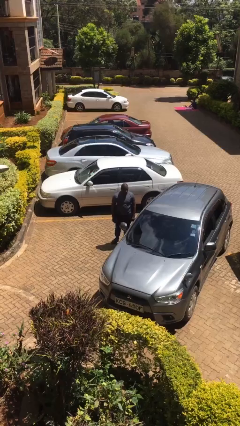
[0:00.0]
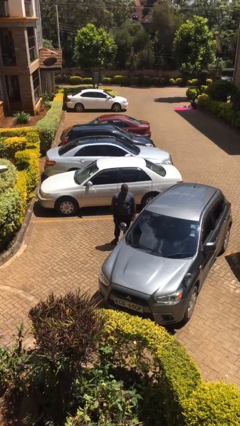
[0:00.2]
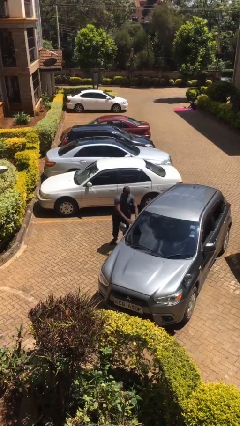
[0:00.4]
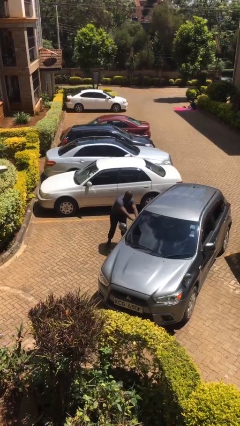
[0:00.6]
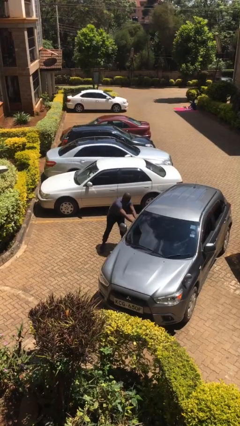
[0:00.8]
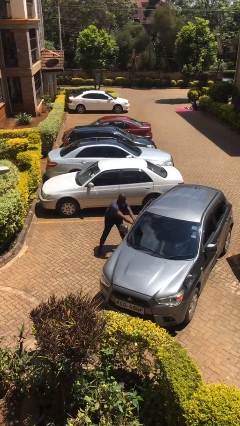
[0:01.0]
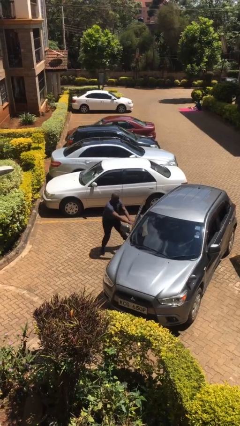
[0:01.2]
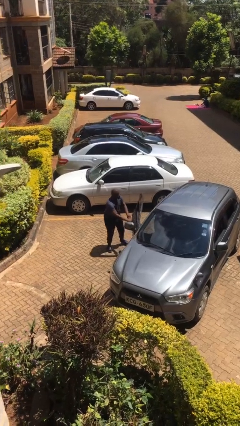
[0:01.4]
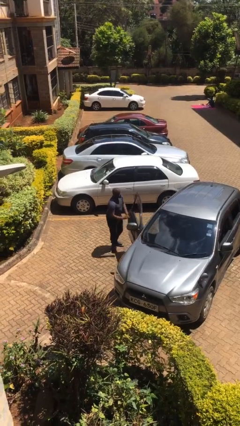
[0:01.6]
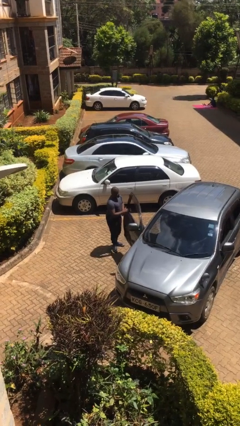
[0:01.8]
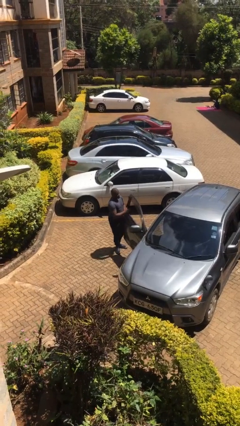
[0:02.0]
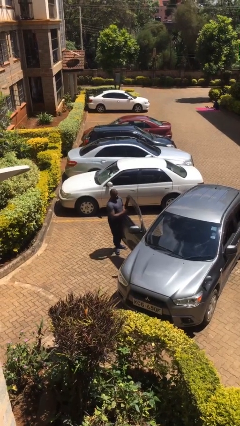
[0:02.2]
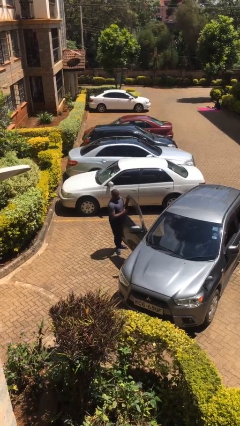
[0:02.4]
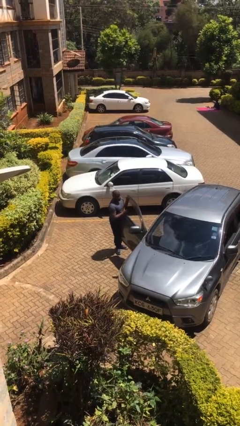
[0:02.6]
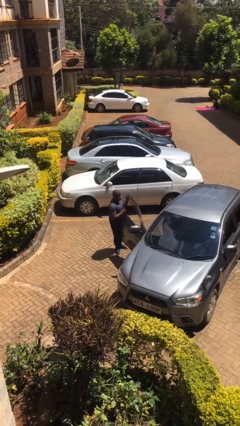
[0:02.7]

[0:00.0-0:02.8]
person opens car door

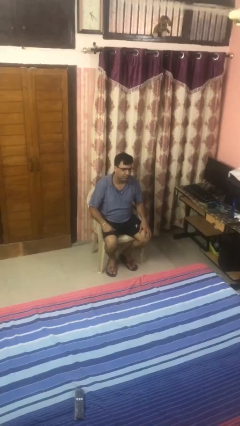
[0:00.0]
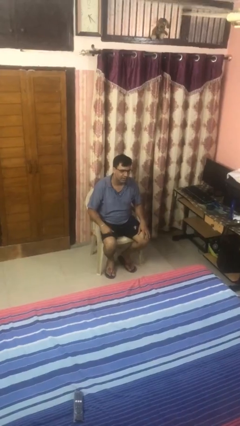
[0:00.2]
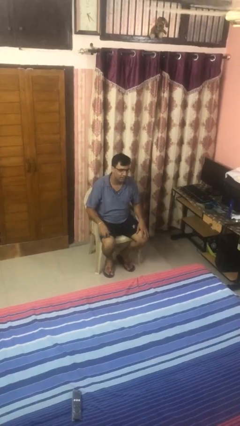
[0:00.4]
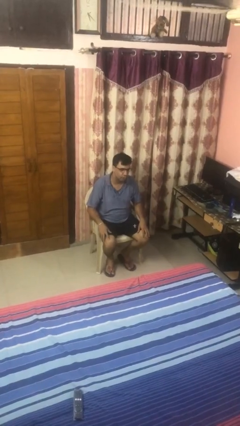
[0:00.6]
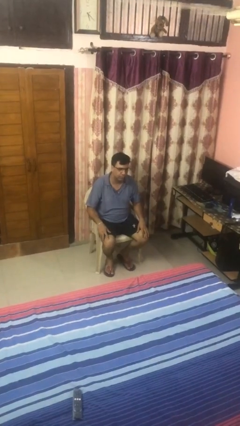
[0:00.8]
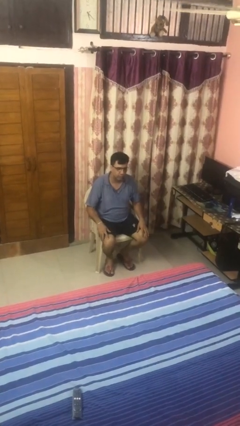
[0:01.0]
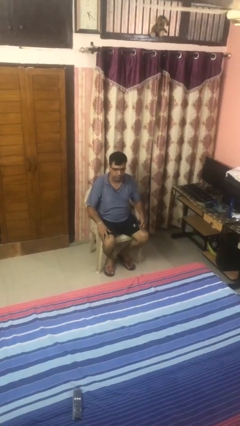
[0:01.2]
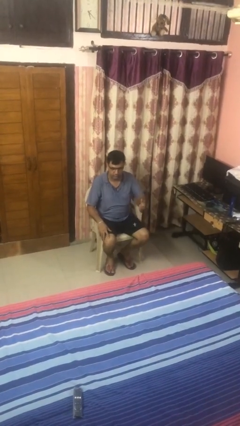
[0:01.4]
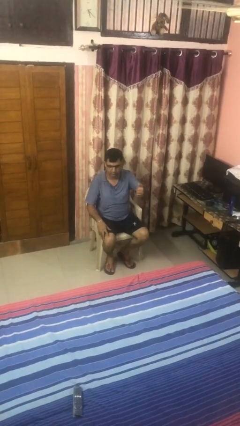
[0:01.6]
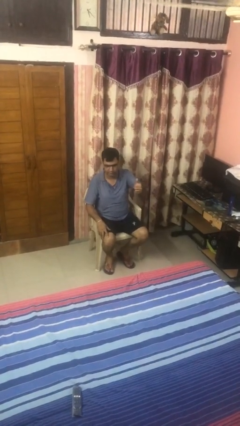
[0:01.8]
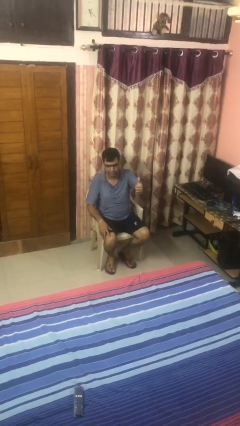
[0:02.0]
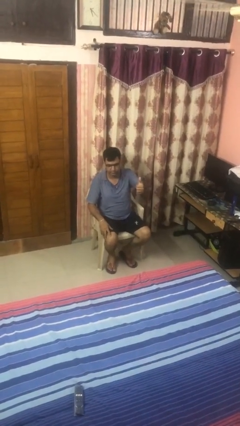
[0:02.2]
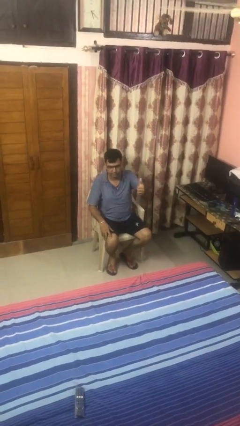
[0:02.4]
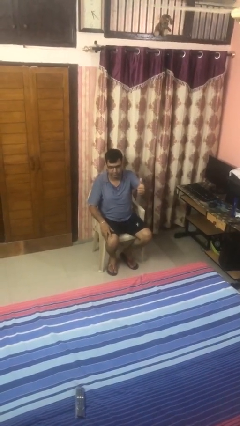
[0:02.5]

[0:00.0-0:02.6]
person gestures thumbs up

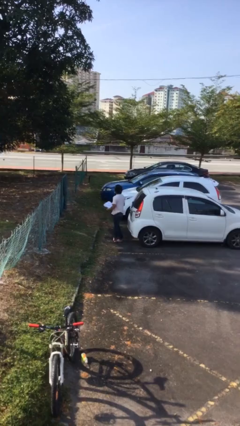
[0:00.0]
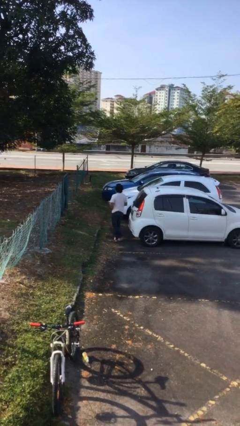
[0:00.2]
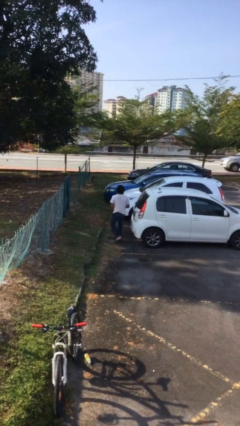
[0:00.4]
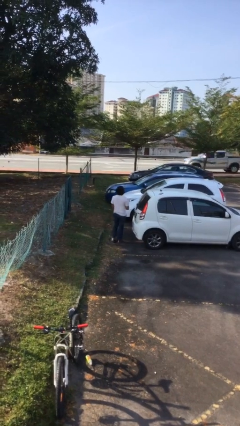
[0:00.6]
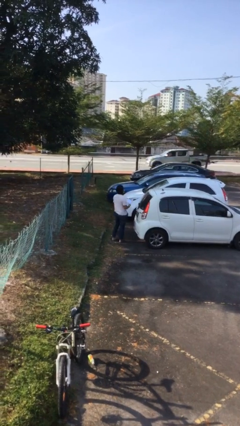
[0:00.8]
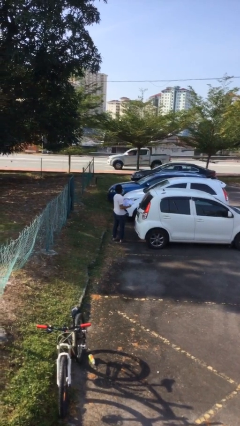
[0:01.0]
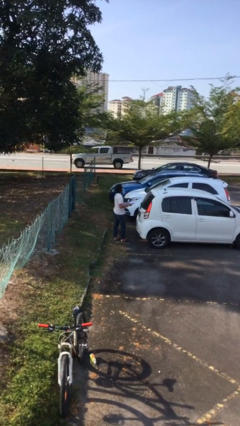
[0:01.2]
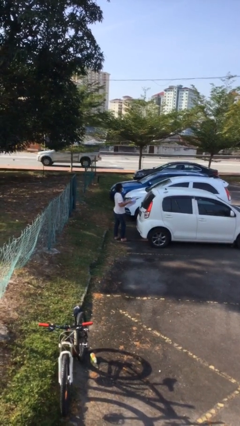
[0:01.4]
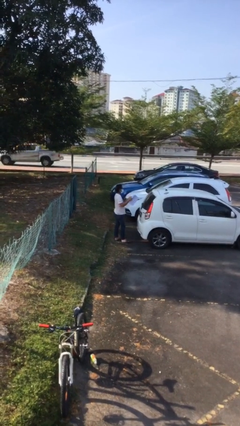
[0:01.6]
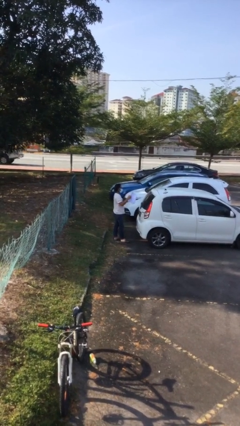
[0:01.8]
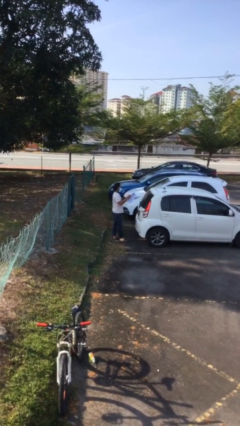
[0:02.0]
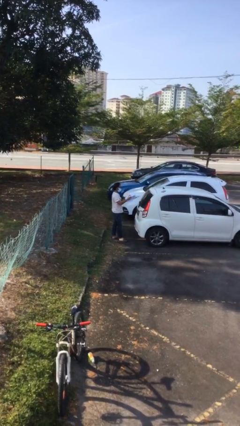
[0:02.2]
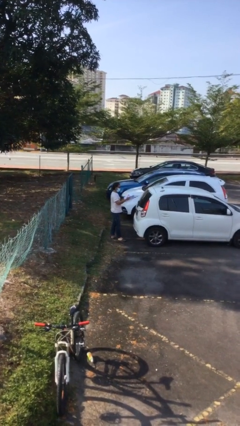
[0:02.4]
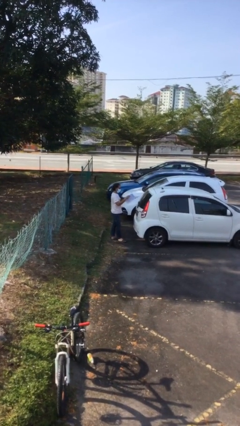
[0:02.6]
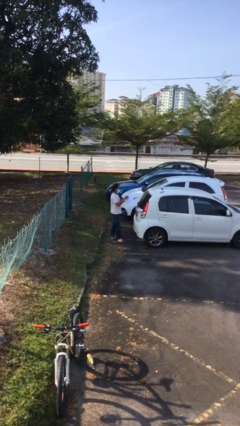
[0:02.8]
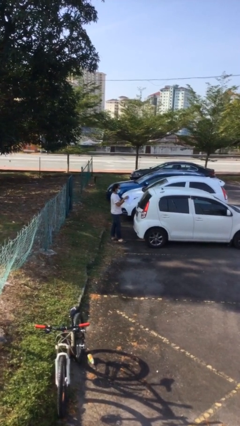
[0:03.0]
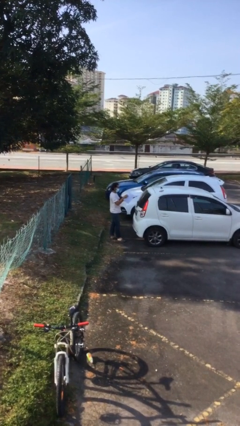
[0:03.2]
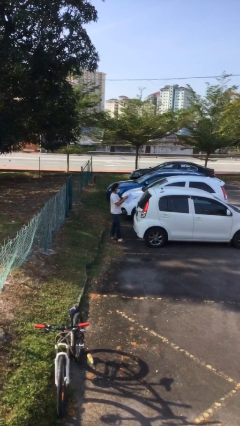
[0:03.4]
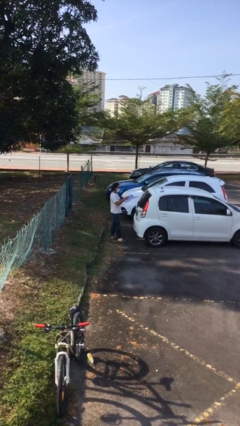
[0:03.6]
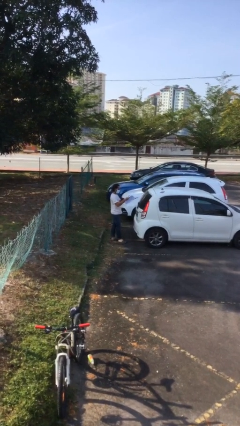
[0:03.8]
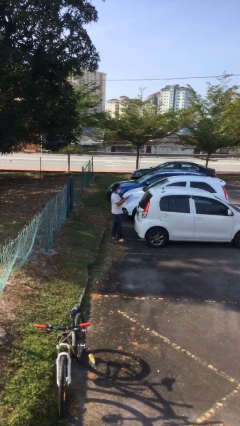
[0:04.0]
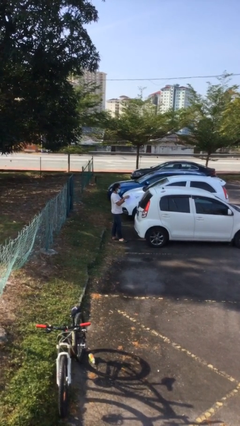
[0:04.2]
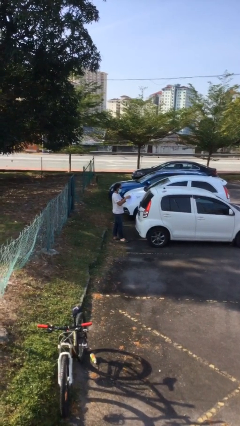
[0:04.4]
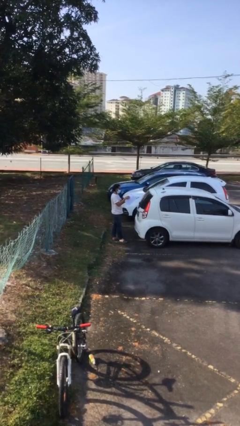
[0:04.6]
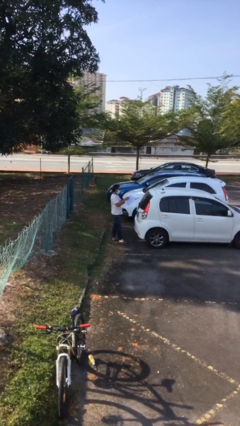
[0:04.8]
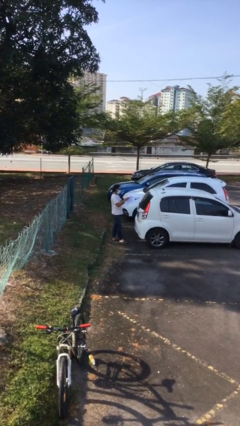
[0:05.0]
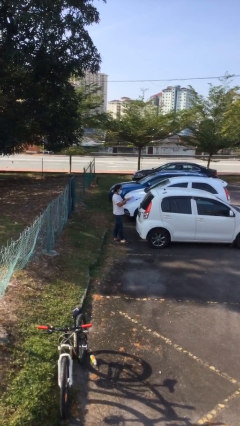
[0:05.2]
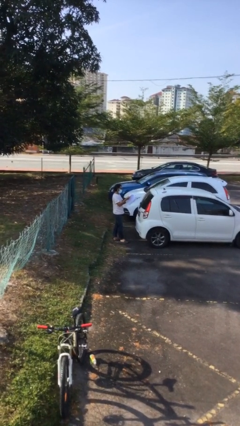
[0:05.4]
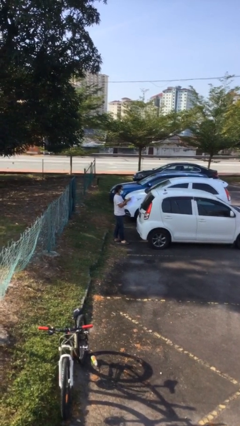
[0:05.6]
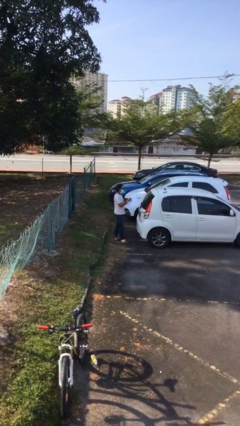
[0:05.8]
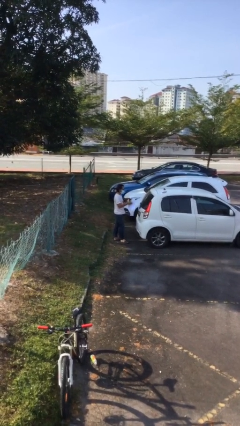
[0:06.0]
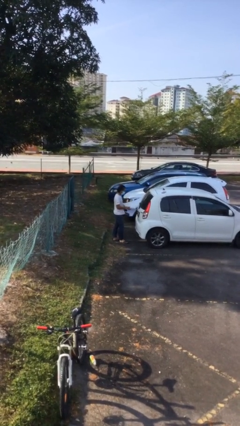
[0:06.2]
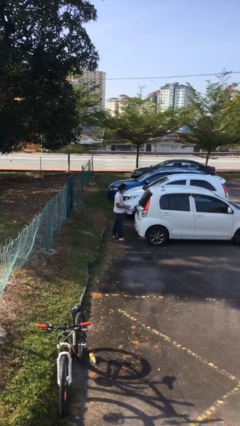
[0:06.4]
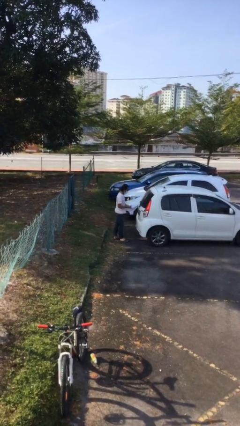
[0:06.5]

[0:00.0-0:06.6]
person reads document

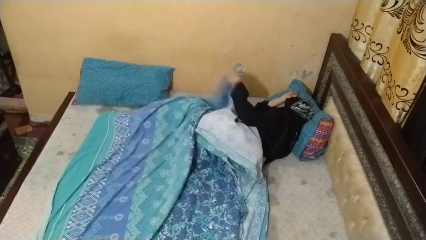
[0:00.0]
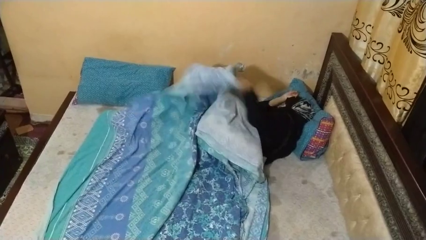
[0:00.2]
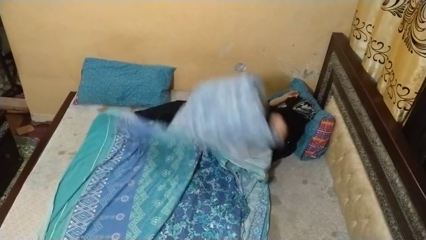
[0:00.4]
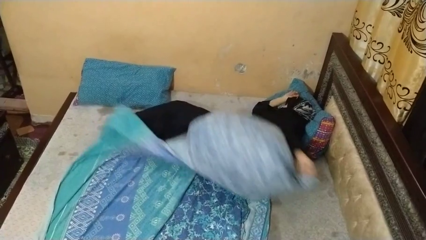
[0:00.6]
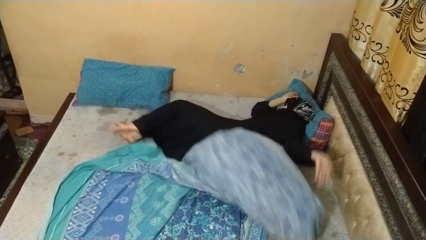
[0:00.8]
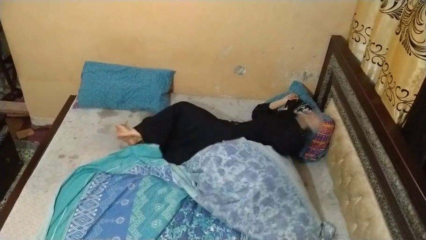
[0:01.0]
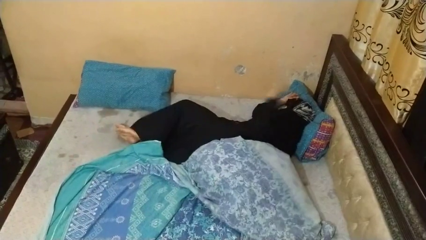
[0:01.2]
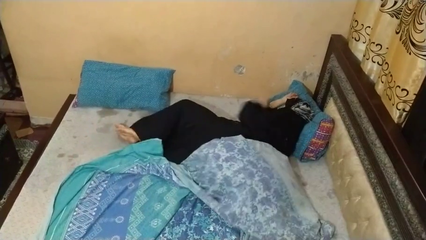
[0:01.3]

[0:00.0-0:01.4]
person uncovers with bedsheets

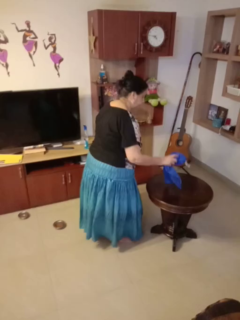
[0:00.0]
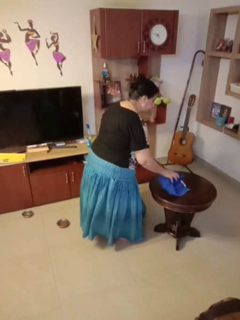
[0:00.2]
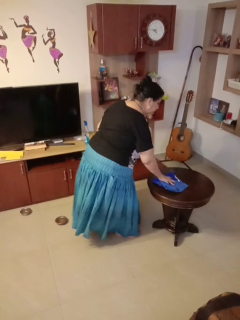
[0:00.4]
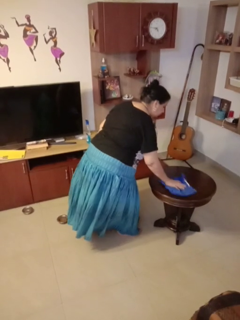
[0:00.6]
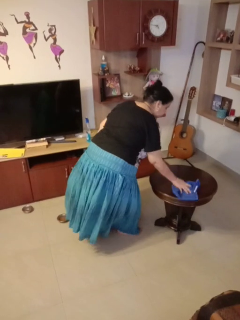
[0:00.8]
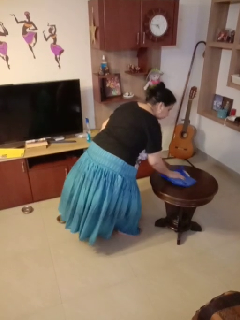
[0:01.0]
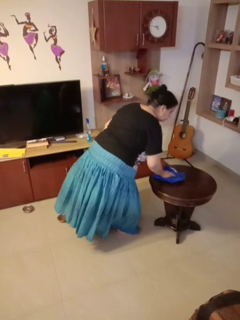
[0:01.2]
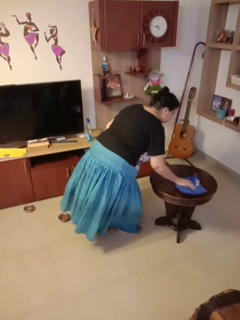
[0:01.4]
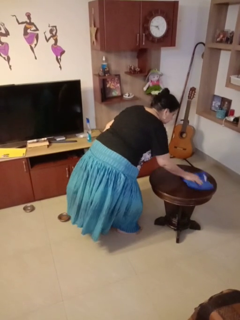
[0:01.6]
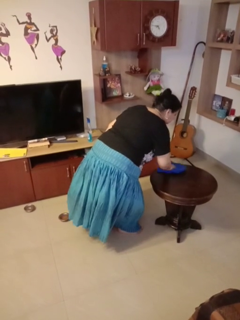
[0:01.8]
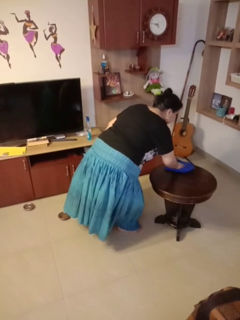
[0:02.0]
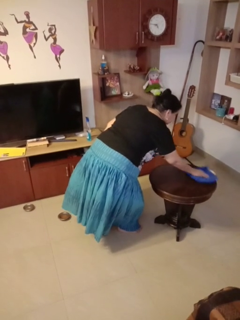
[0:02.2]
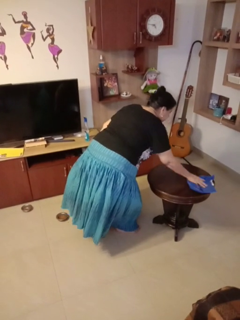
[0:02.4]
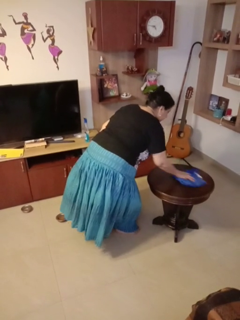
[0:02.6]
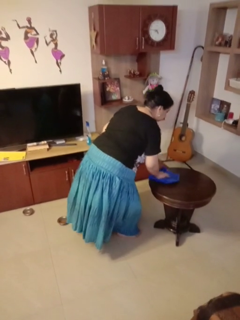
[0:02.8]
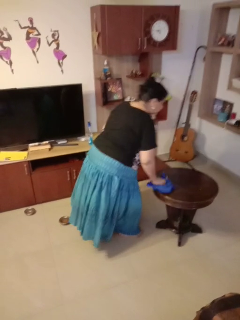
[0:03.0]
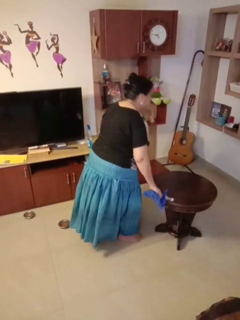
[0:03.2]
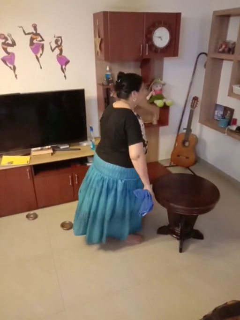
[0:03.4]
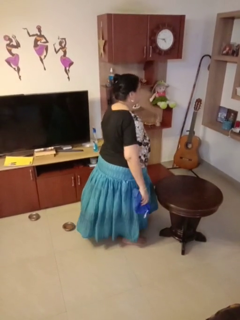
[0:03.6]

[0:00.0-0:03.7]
person cleans table with rag

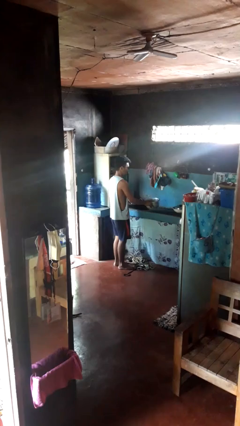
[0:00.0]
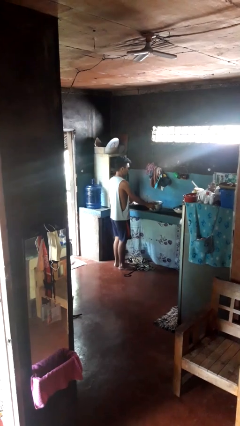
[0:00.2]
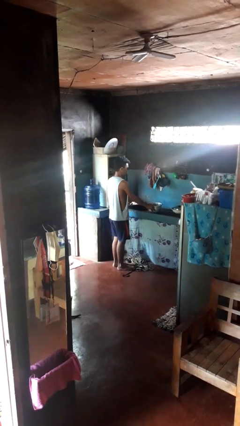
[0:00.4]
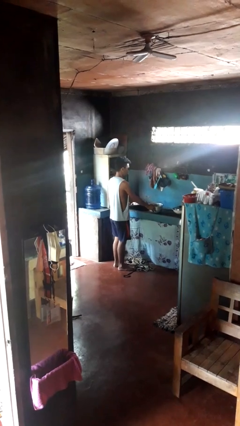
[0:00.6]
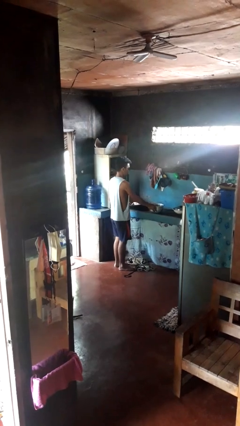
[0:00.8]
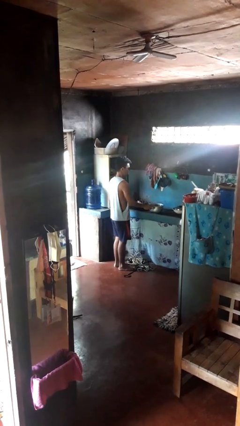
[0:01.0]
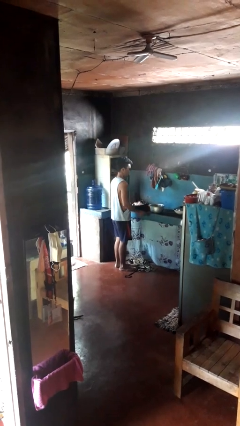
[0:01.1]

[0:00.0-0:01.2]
person puts down object on countertop
